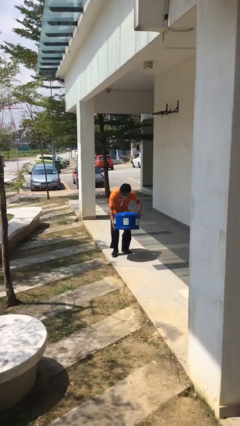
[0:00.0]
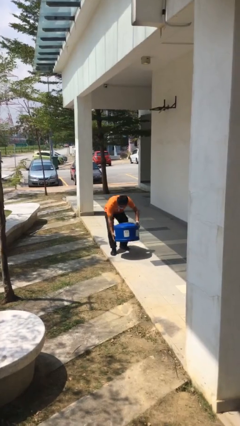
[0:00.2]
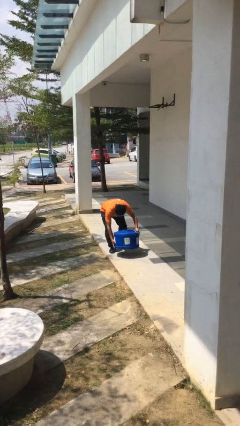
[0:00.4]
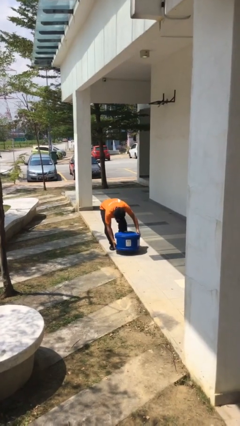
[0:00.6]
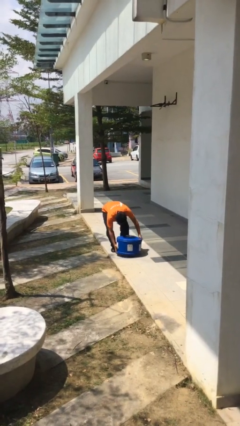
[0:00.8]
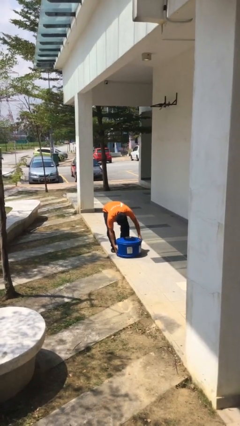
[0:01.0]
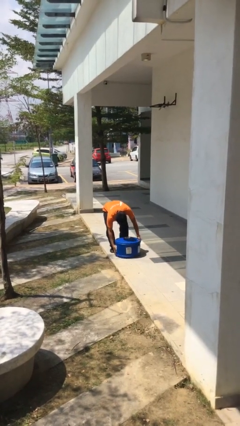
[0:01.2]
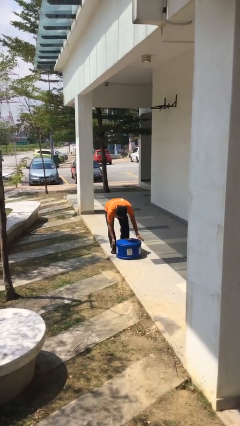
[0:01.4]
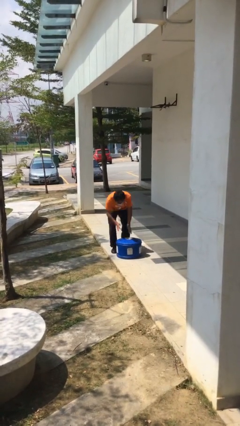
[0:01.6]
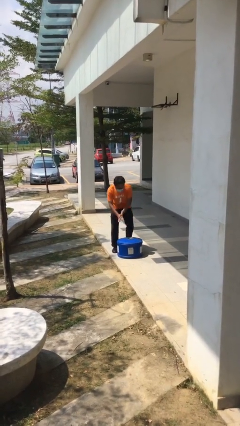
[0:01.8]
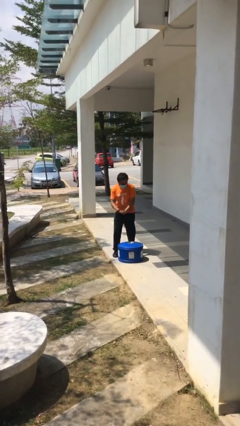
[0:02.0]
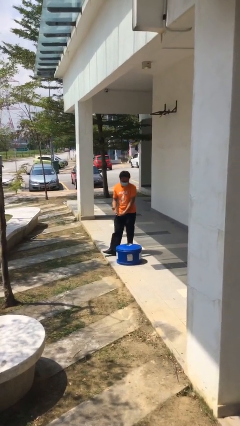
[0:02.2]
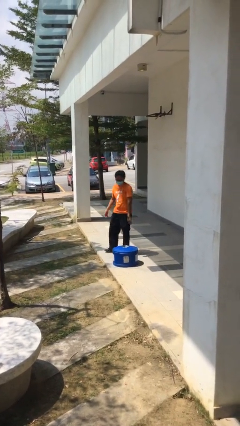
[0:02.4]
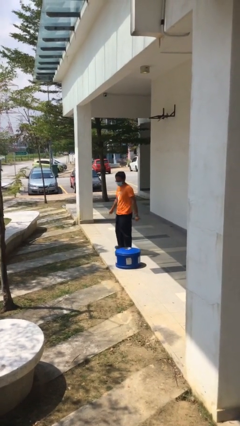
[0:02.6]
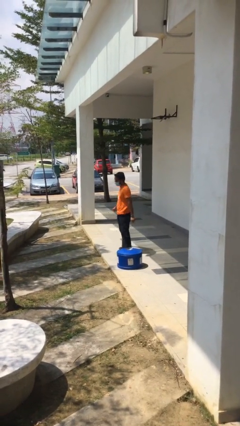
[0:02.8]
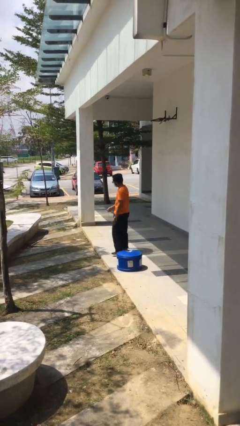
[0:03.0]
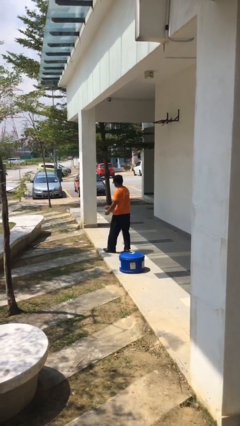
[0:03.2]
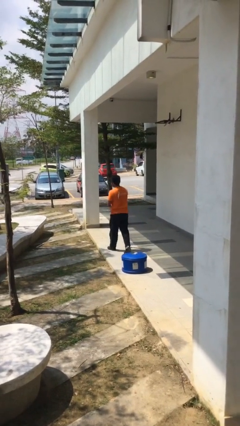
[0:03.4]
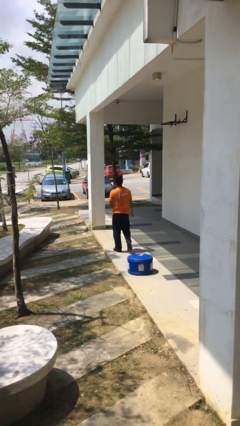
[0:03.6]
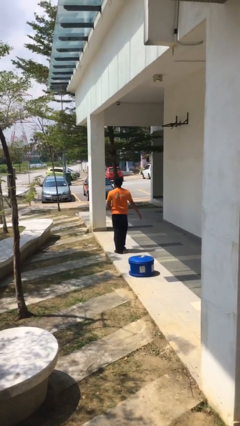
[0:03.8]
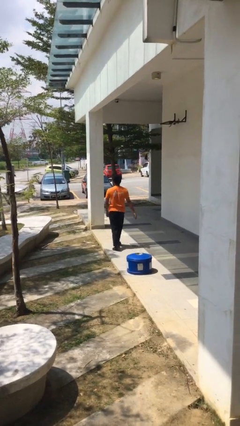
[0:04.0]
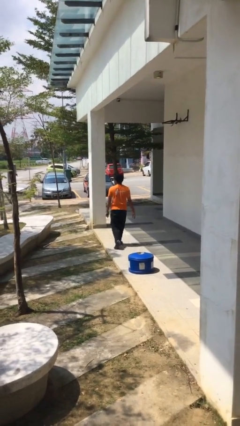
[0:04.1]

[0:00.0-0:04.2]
person puts down object on floor

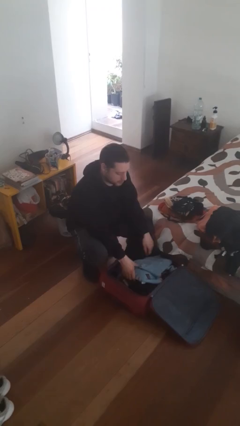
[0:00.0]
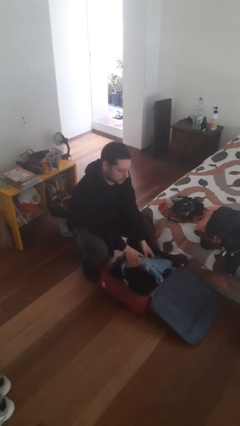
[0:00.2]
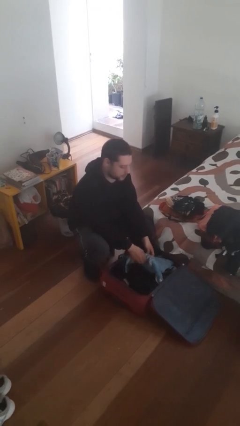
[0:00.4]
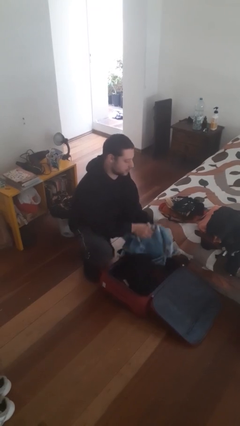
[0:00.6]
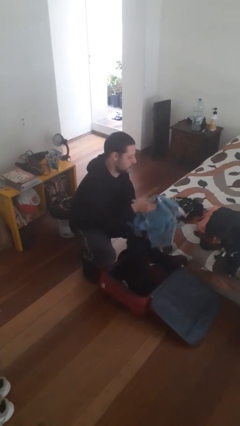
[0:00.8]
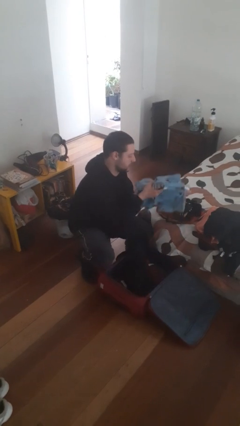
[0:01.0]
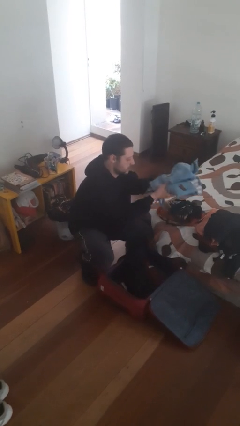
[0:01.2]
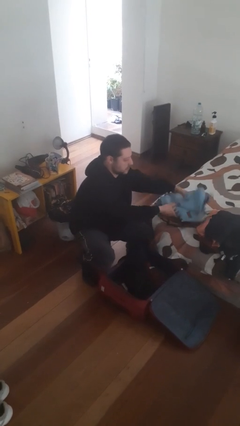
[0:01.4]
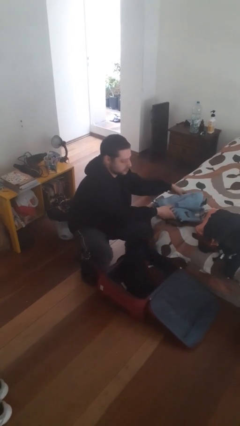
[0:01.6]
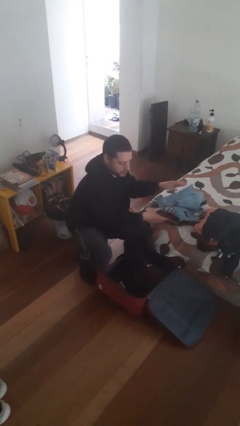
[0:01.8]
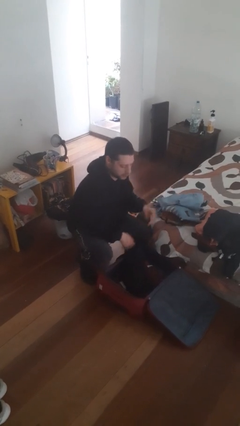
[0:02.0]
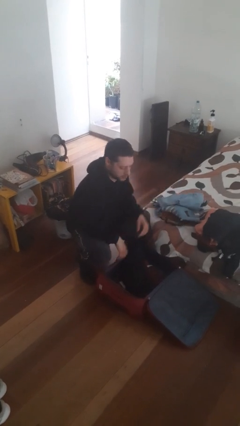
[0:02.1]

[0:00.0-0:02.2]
person unloads clothes from suitcase

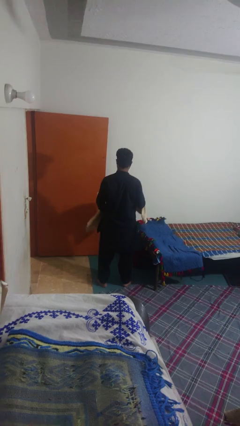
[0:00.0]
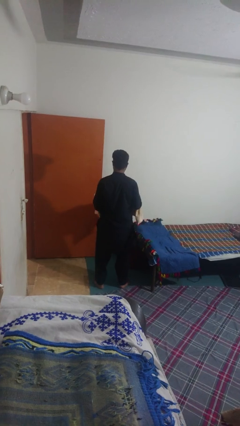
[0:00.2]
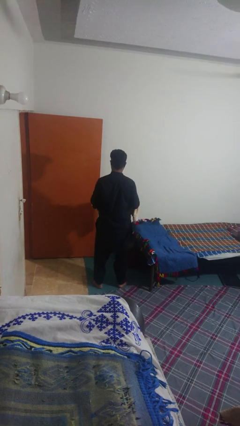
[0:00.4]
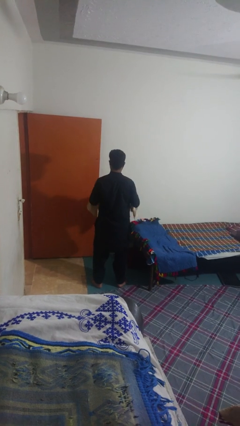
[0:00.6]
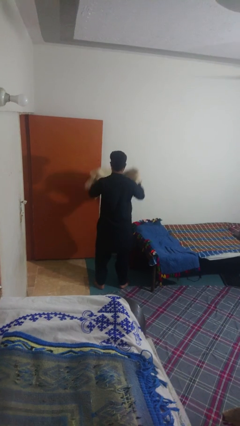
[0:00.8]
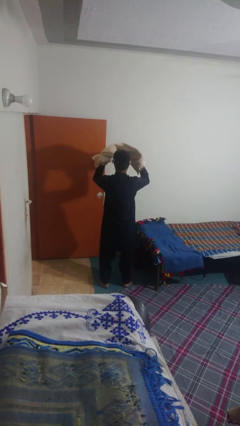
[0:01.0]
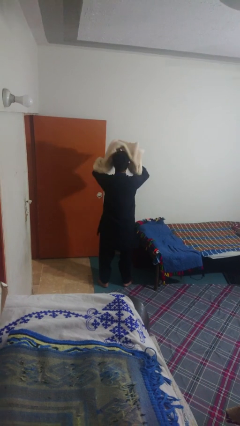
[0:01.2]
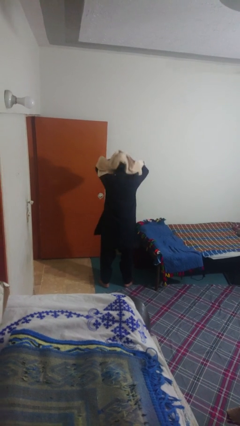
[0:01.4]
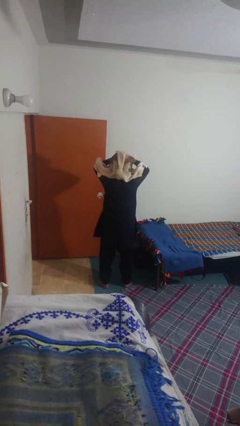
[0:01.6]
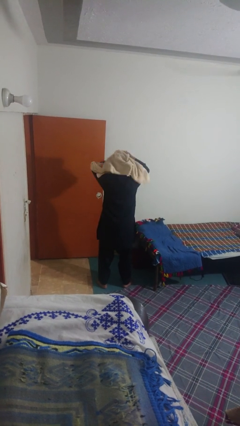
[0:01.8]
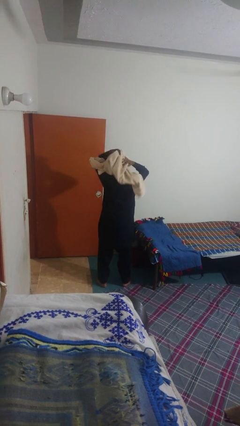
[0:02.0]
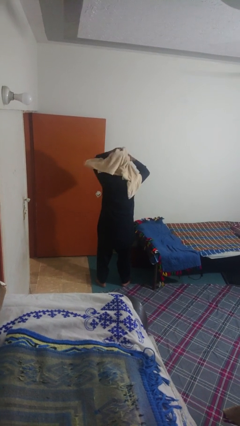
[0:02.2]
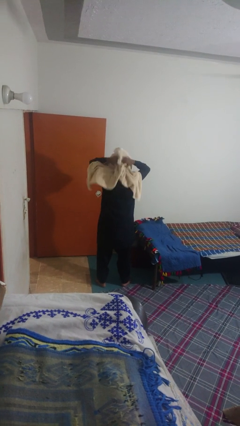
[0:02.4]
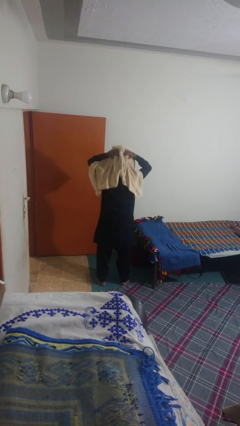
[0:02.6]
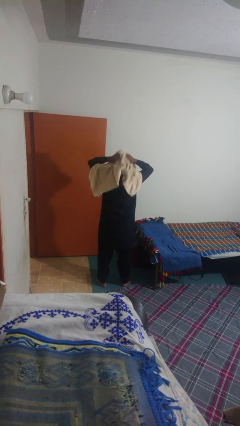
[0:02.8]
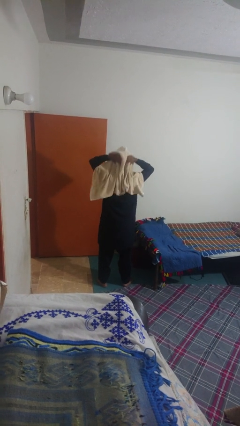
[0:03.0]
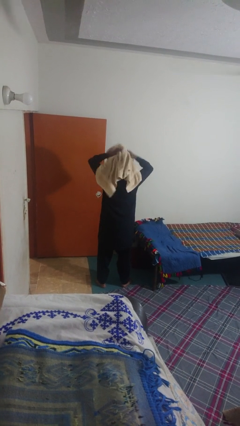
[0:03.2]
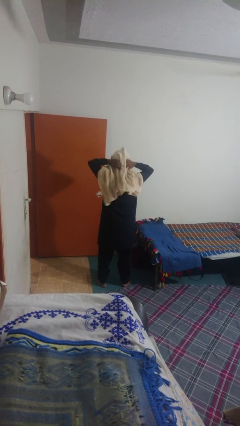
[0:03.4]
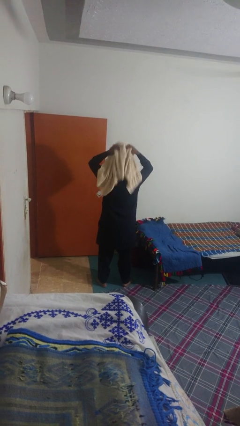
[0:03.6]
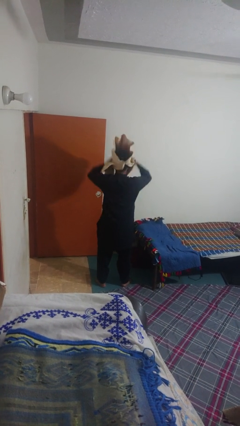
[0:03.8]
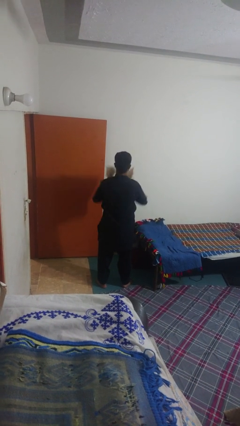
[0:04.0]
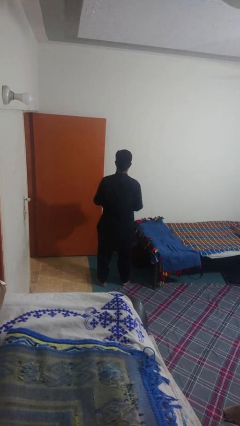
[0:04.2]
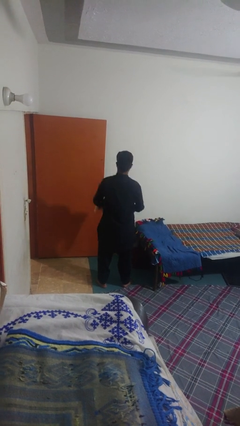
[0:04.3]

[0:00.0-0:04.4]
person dries hair with towel

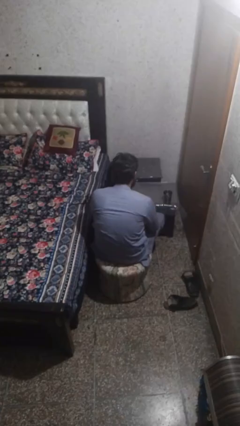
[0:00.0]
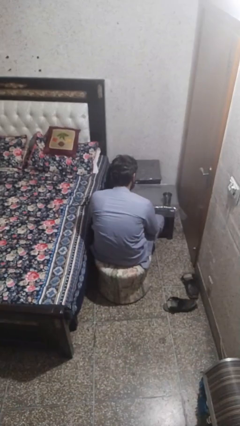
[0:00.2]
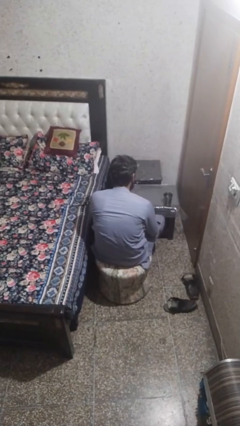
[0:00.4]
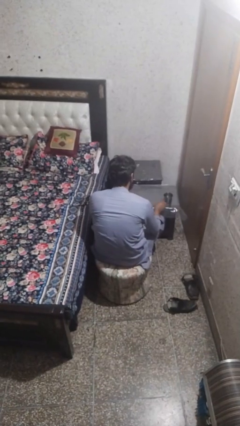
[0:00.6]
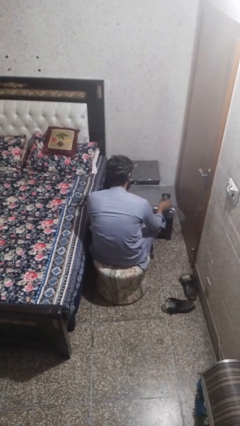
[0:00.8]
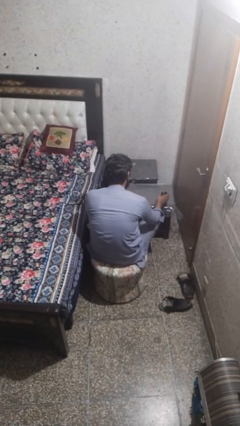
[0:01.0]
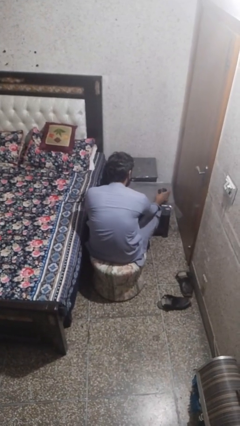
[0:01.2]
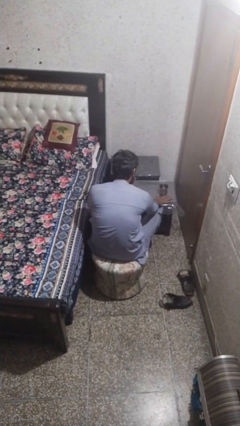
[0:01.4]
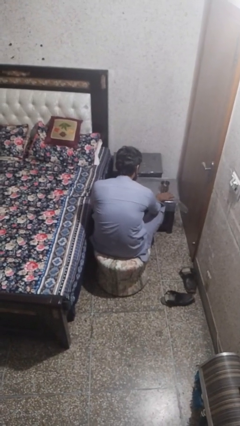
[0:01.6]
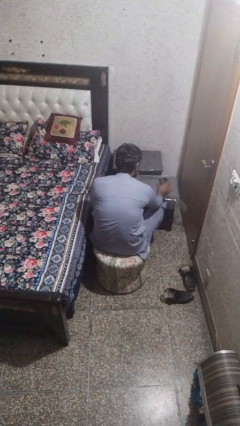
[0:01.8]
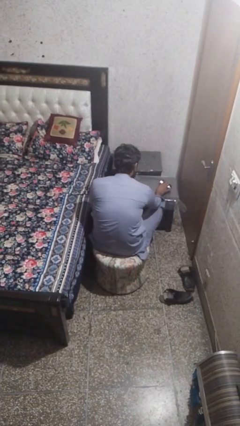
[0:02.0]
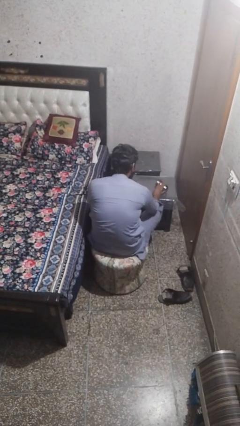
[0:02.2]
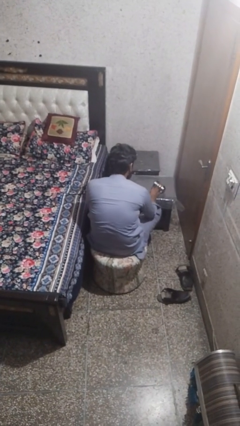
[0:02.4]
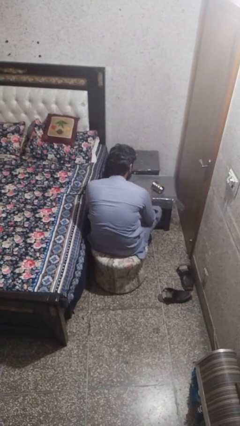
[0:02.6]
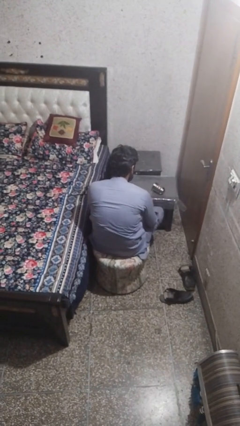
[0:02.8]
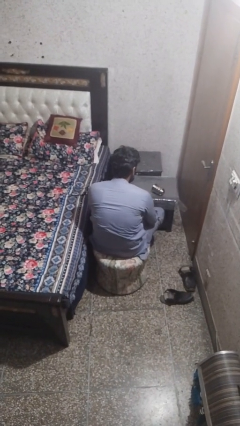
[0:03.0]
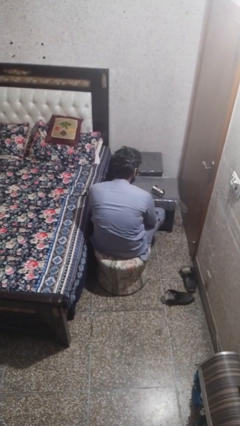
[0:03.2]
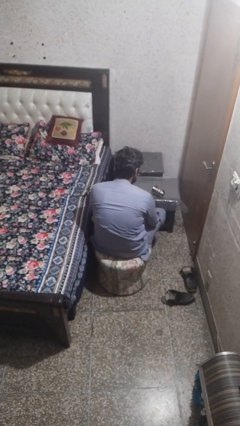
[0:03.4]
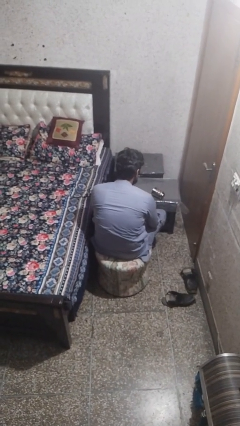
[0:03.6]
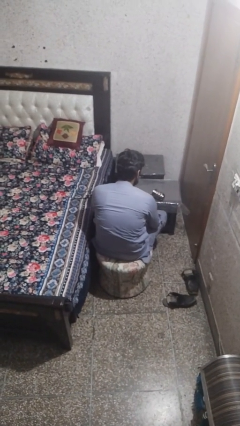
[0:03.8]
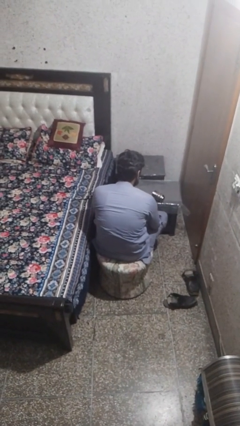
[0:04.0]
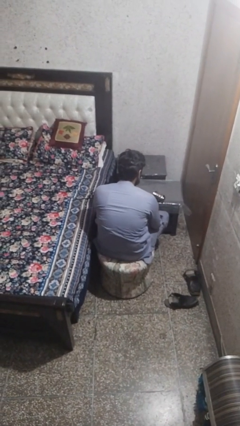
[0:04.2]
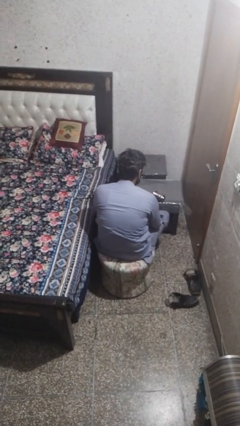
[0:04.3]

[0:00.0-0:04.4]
person knocks over glass

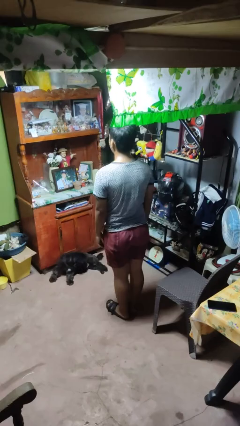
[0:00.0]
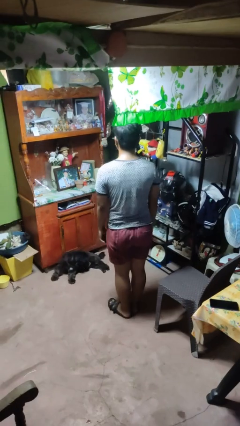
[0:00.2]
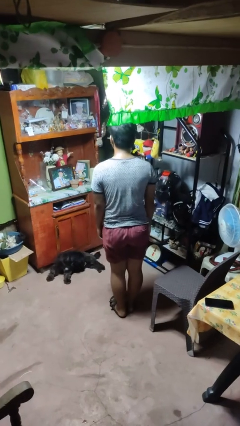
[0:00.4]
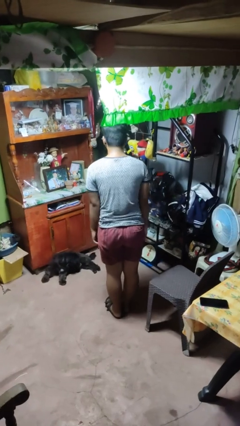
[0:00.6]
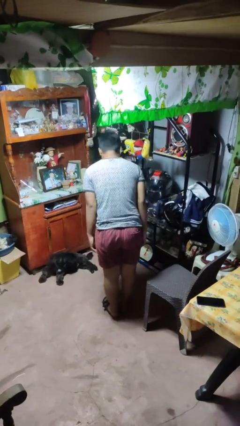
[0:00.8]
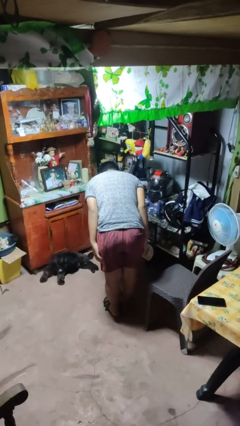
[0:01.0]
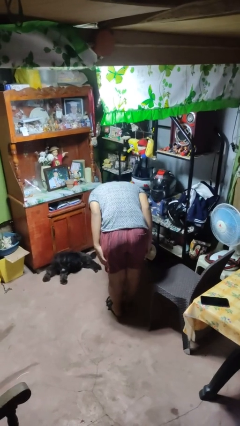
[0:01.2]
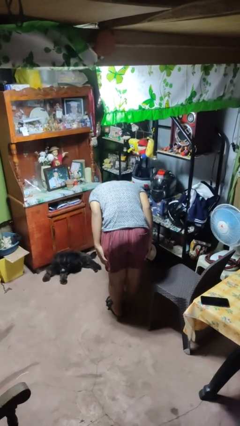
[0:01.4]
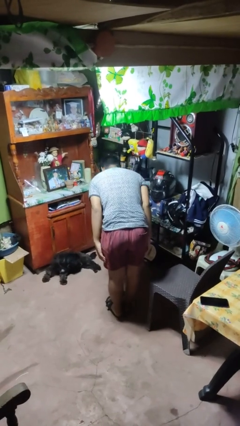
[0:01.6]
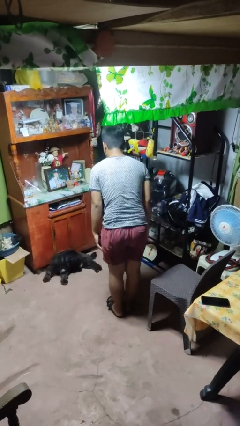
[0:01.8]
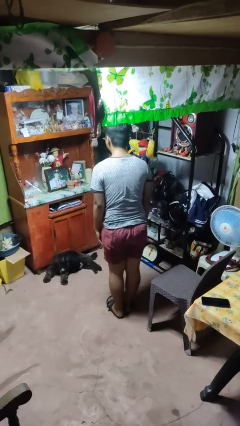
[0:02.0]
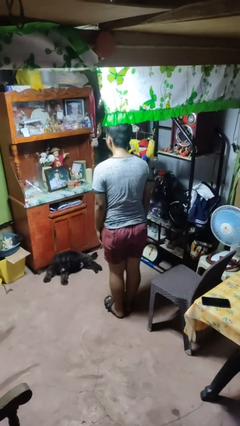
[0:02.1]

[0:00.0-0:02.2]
person bows
